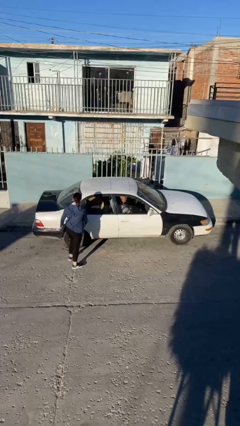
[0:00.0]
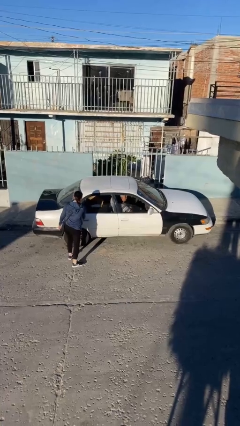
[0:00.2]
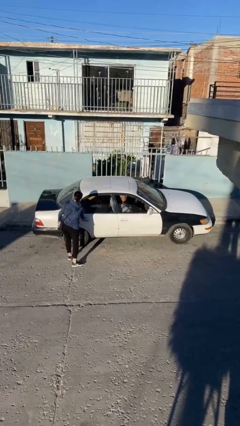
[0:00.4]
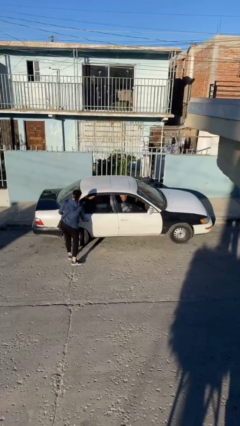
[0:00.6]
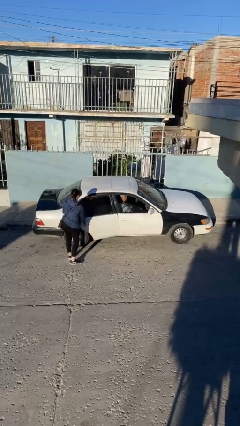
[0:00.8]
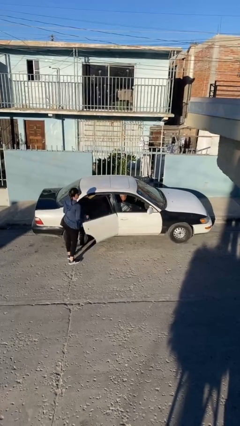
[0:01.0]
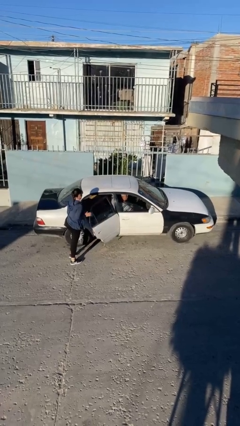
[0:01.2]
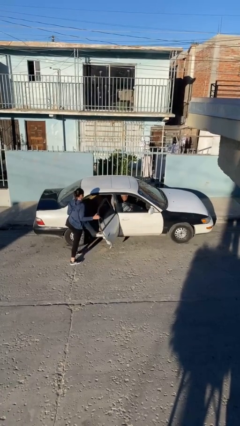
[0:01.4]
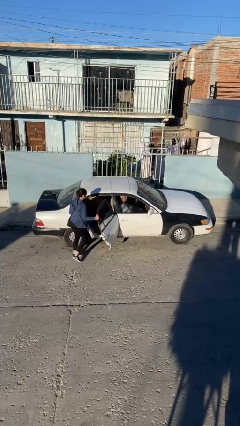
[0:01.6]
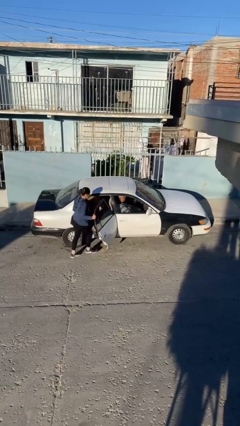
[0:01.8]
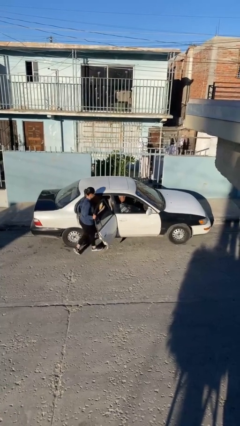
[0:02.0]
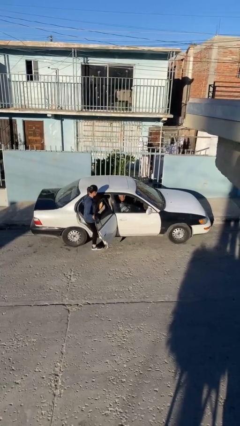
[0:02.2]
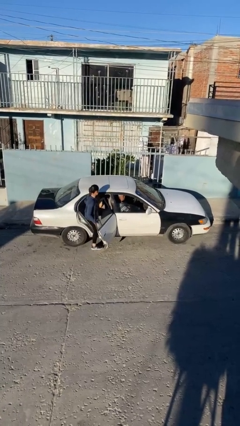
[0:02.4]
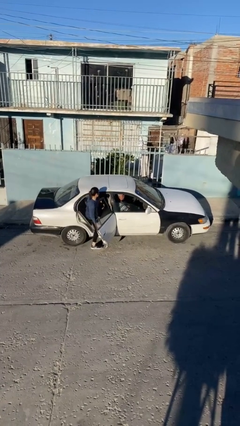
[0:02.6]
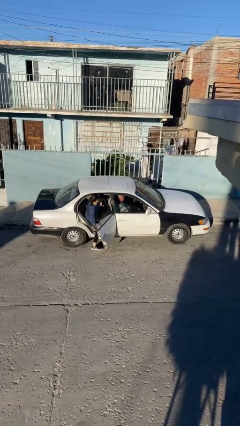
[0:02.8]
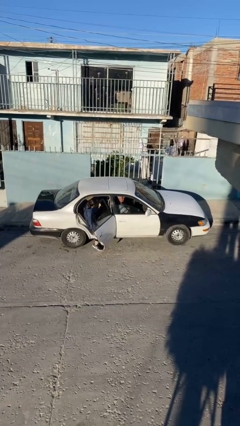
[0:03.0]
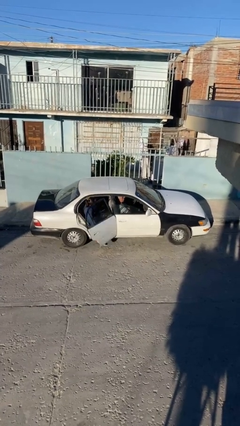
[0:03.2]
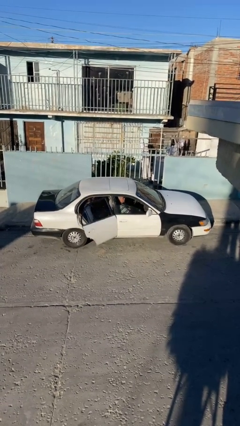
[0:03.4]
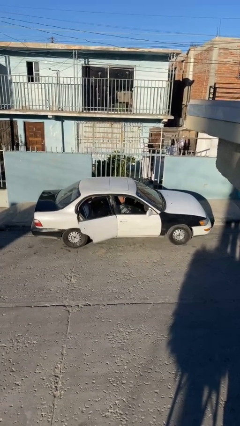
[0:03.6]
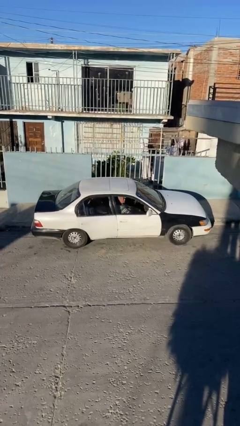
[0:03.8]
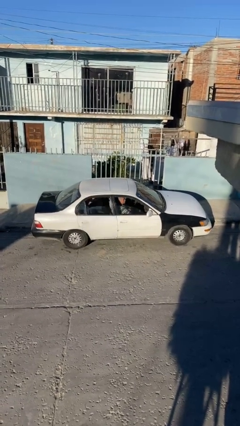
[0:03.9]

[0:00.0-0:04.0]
car picks up person

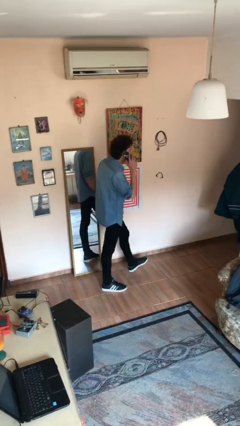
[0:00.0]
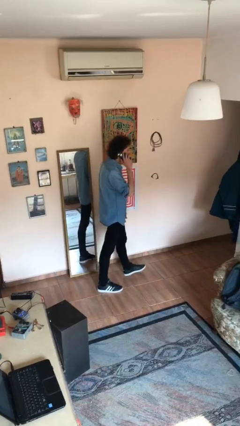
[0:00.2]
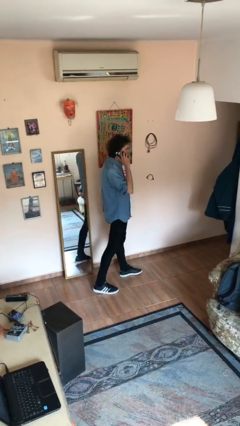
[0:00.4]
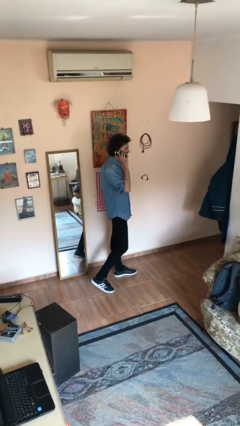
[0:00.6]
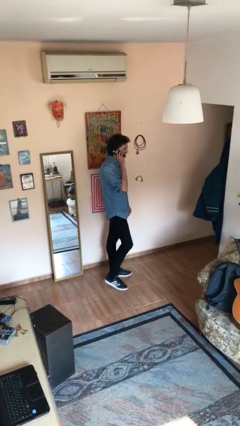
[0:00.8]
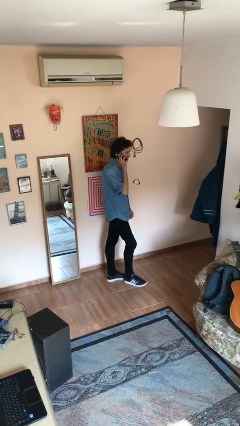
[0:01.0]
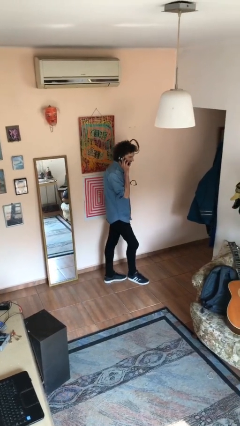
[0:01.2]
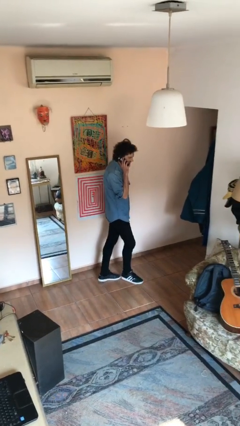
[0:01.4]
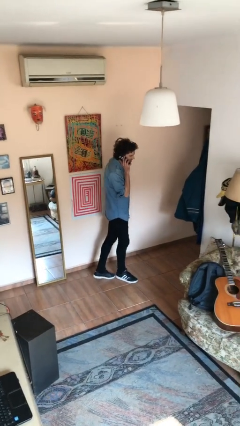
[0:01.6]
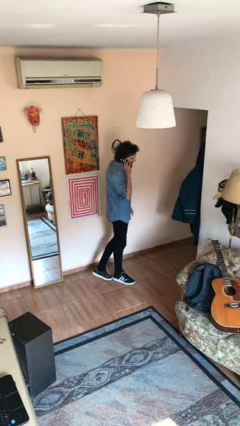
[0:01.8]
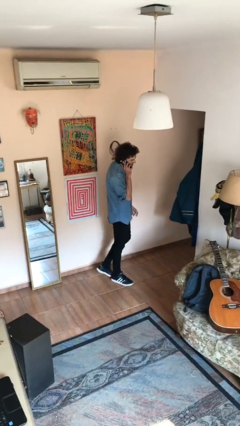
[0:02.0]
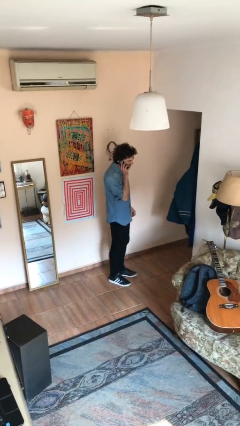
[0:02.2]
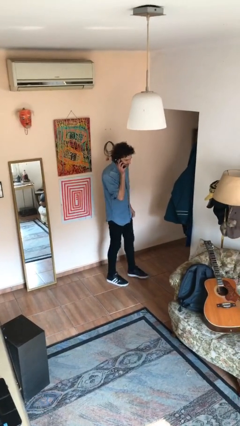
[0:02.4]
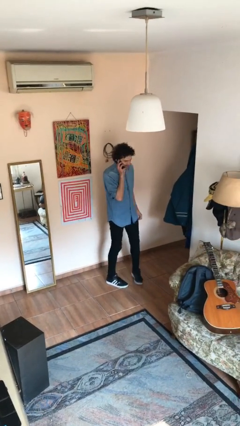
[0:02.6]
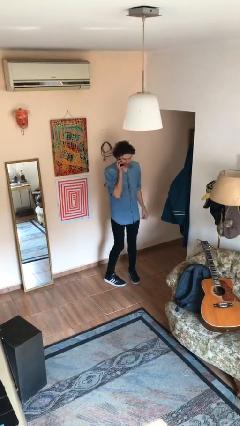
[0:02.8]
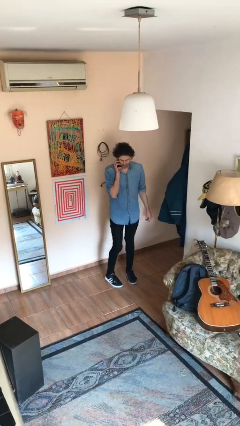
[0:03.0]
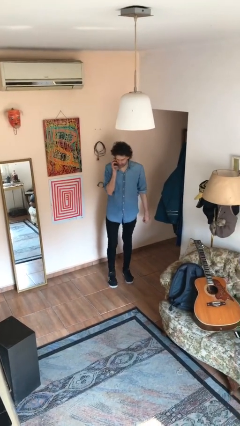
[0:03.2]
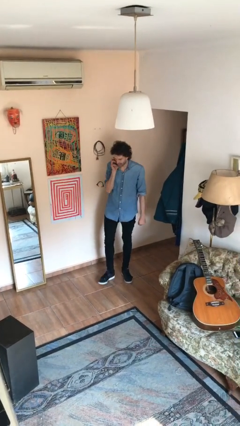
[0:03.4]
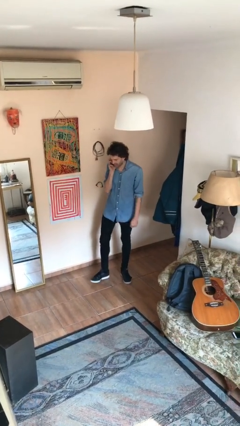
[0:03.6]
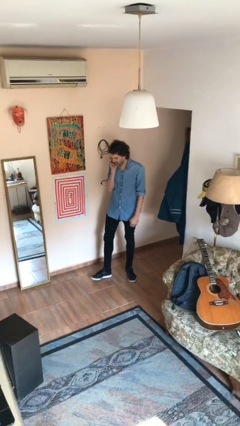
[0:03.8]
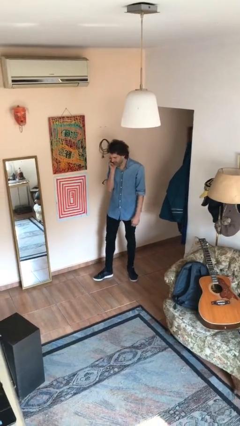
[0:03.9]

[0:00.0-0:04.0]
person talks on phone

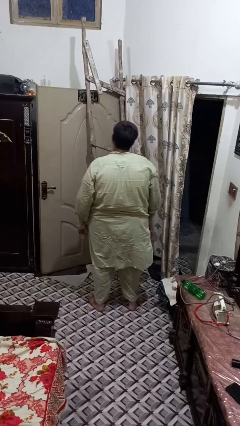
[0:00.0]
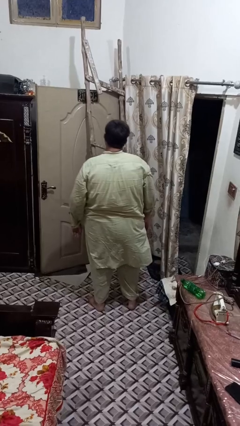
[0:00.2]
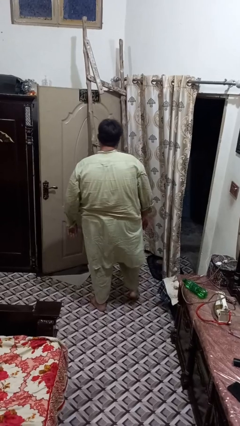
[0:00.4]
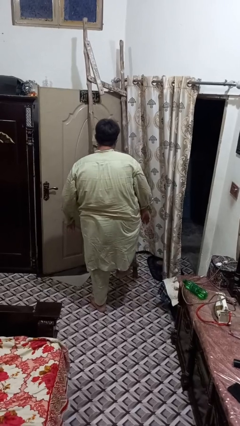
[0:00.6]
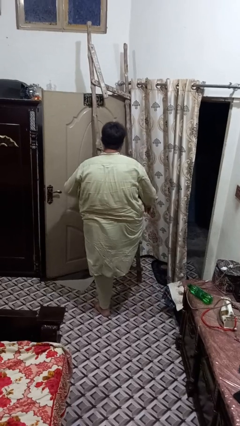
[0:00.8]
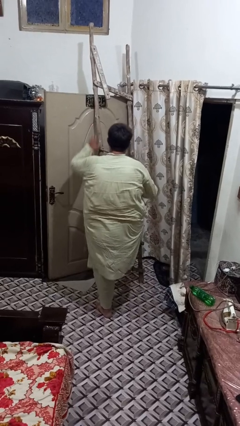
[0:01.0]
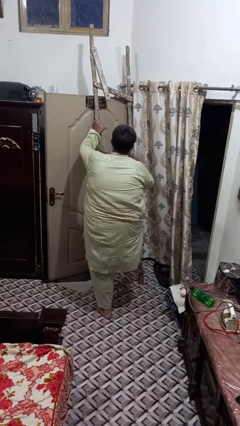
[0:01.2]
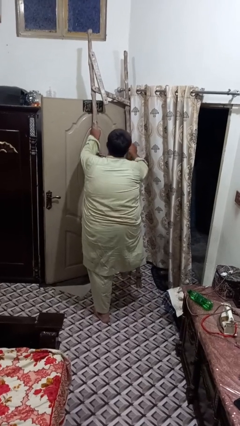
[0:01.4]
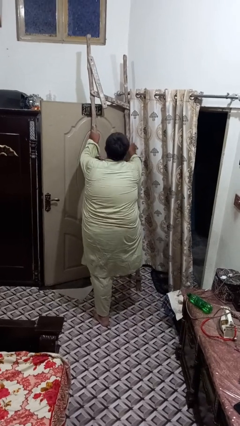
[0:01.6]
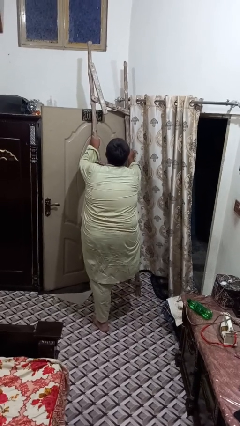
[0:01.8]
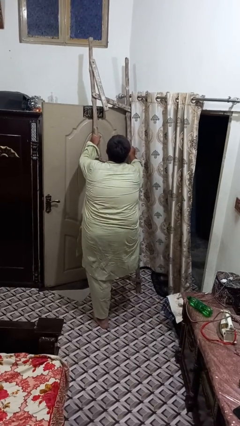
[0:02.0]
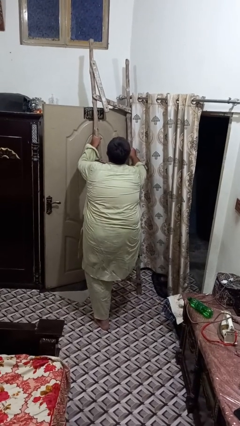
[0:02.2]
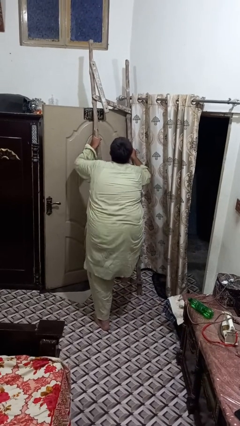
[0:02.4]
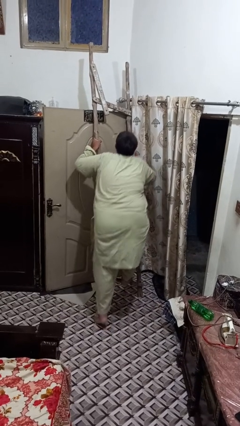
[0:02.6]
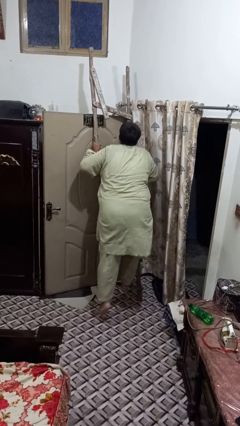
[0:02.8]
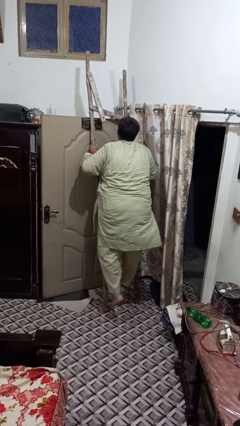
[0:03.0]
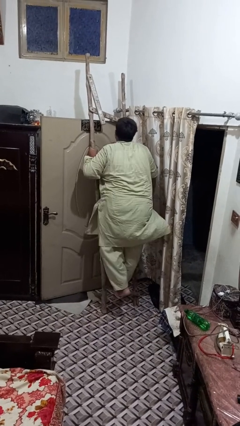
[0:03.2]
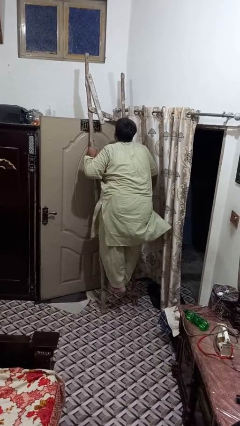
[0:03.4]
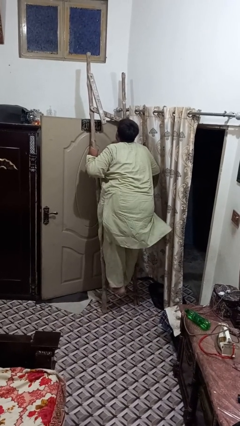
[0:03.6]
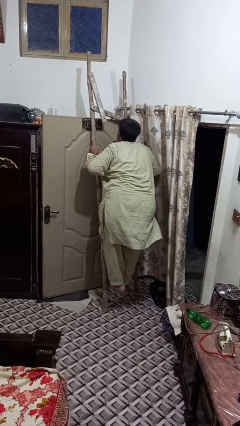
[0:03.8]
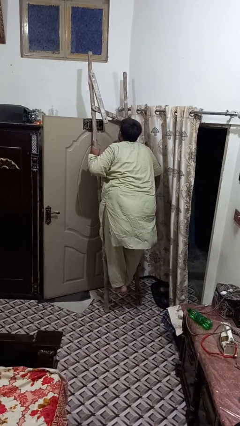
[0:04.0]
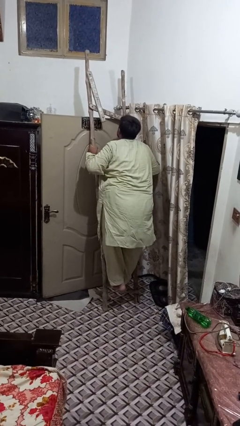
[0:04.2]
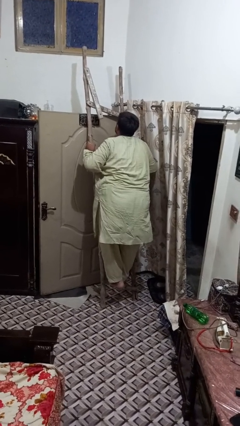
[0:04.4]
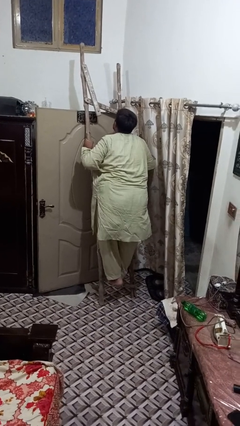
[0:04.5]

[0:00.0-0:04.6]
person climbs up ladder

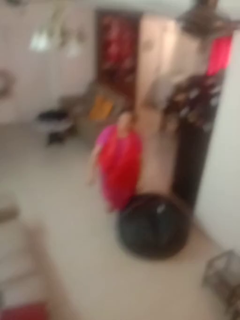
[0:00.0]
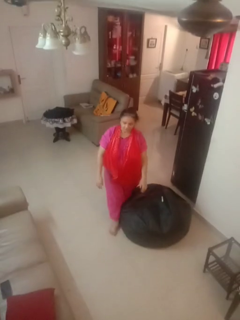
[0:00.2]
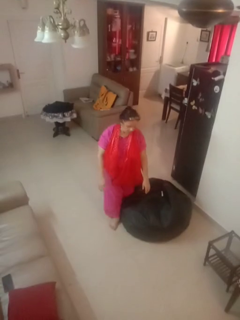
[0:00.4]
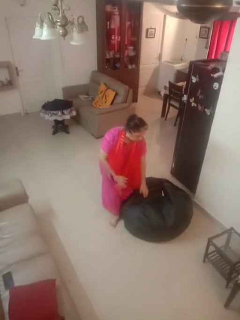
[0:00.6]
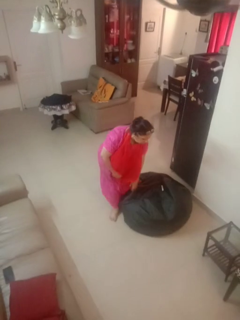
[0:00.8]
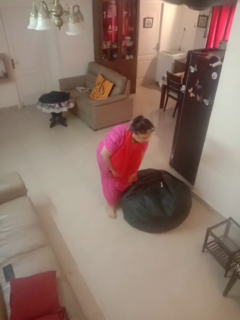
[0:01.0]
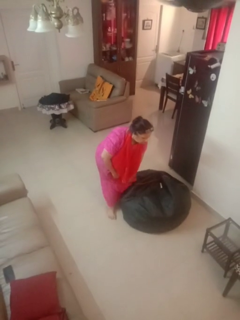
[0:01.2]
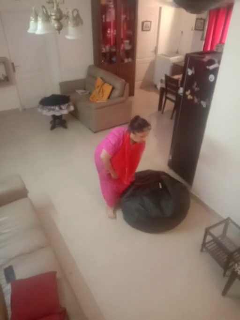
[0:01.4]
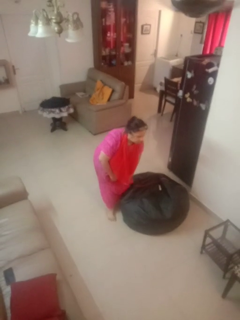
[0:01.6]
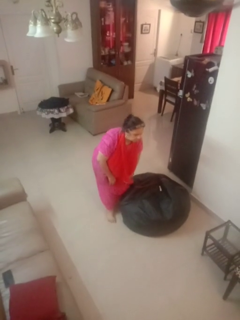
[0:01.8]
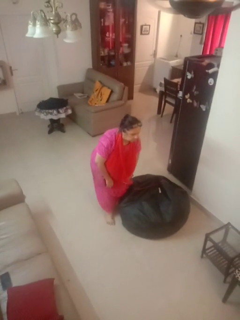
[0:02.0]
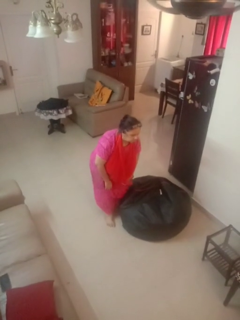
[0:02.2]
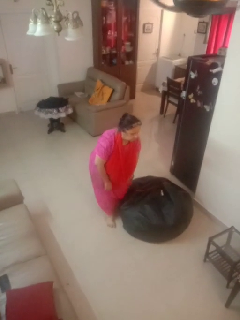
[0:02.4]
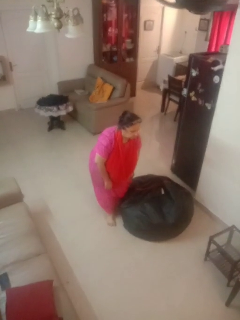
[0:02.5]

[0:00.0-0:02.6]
person stubs toe

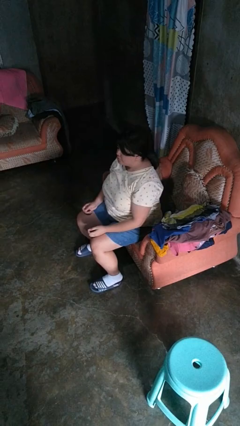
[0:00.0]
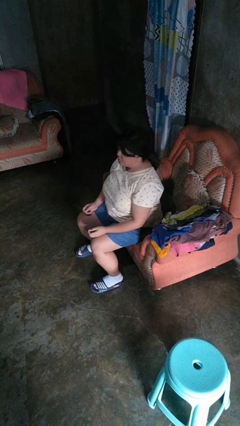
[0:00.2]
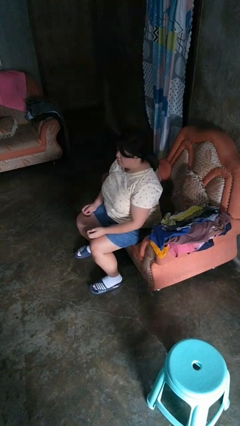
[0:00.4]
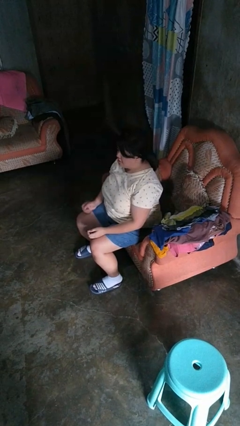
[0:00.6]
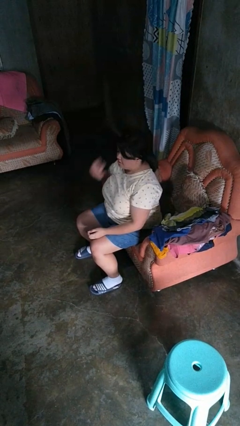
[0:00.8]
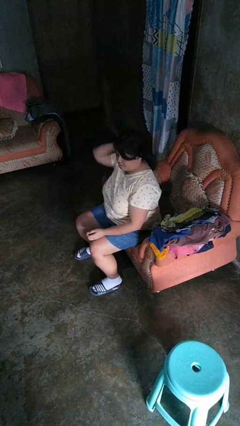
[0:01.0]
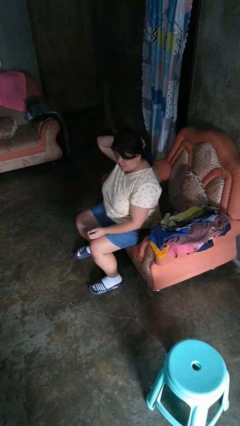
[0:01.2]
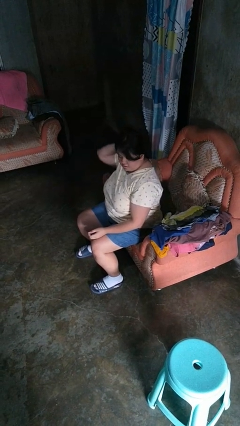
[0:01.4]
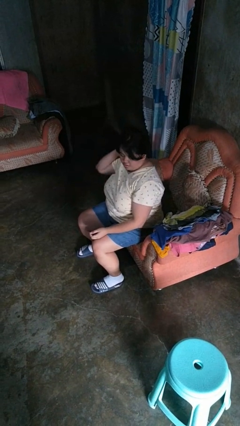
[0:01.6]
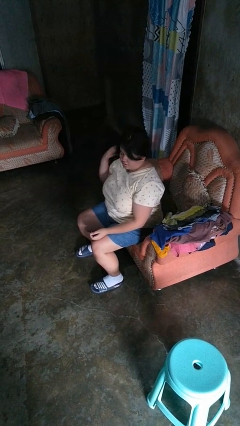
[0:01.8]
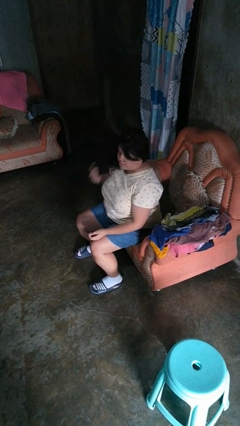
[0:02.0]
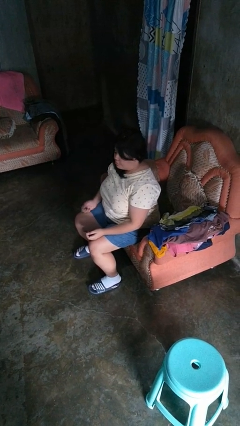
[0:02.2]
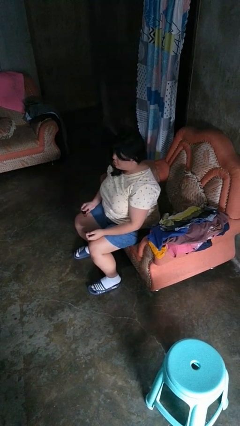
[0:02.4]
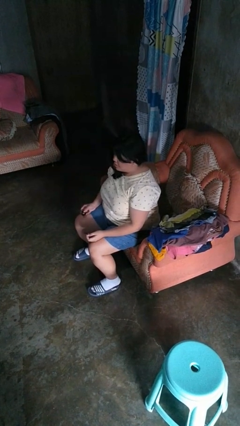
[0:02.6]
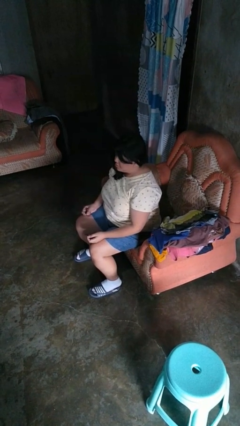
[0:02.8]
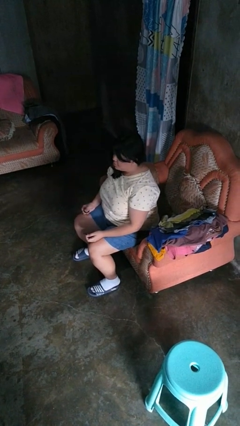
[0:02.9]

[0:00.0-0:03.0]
person takes off hairtie
